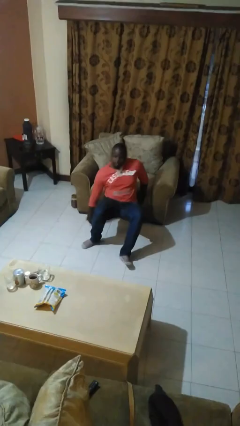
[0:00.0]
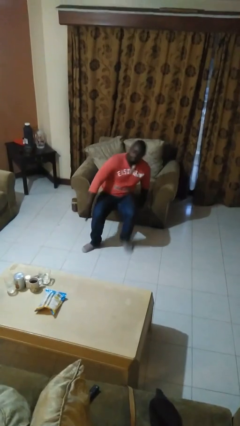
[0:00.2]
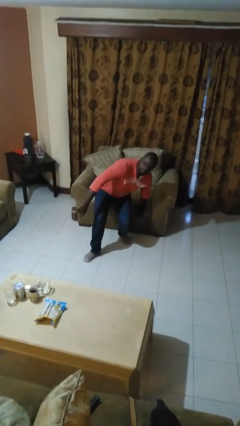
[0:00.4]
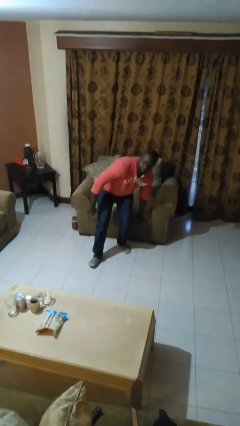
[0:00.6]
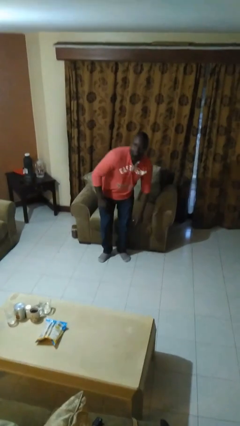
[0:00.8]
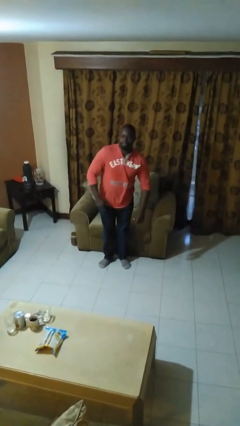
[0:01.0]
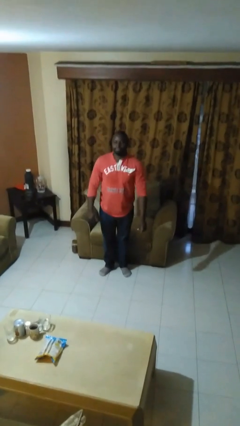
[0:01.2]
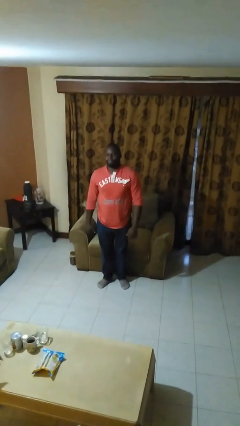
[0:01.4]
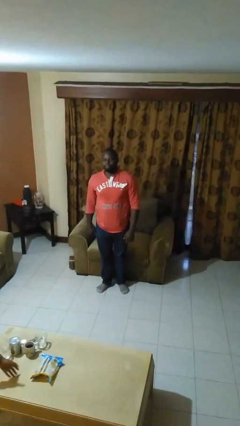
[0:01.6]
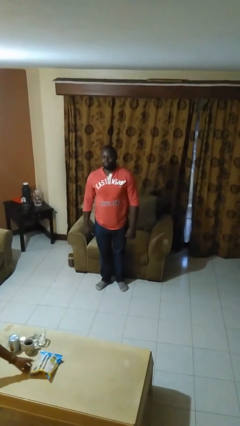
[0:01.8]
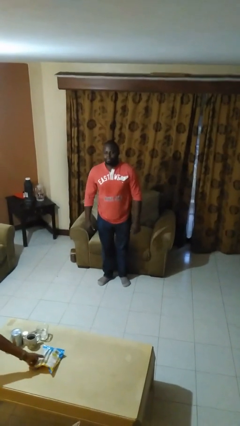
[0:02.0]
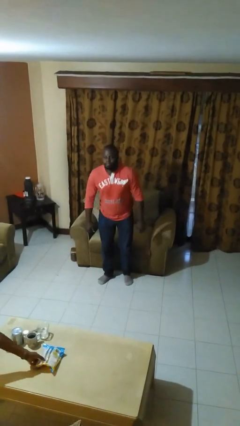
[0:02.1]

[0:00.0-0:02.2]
person stands up from floor

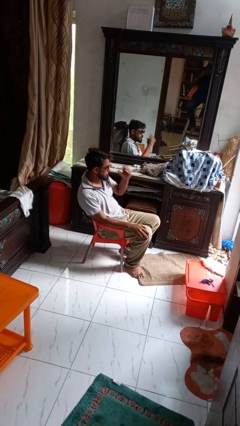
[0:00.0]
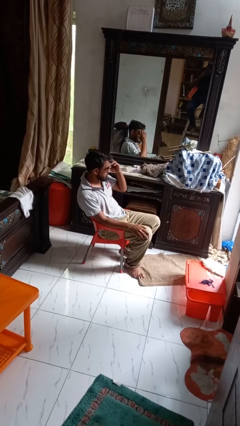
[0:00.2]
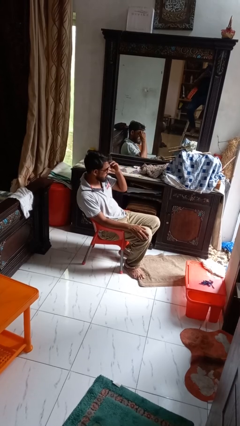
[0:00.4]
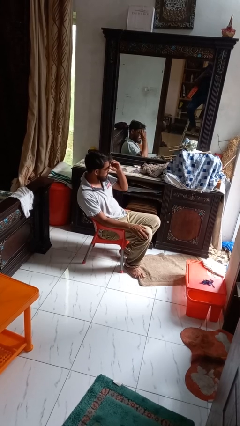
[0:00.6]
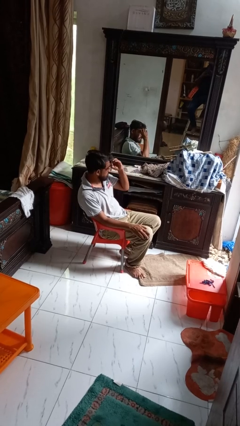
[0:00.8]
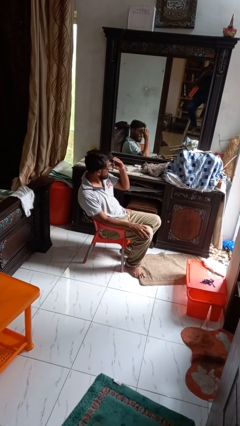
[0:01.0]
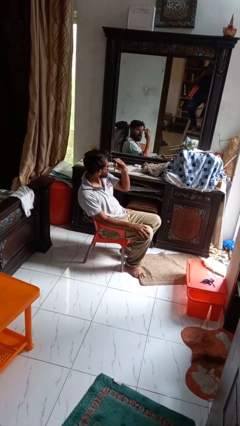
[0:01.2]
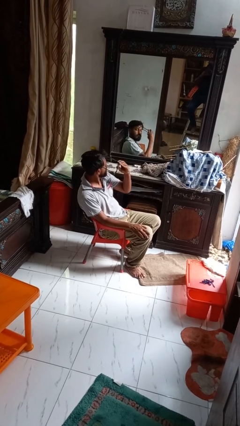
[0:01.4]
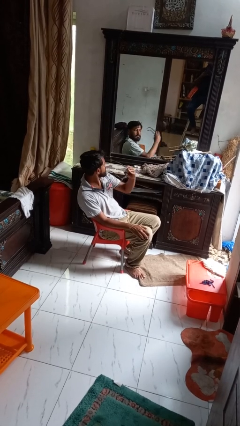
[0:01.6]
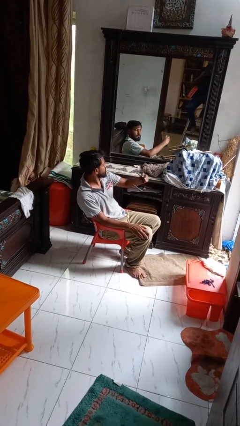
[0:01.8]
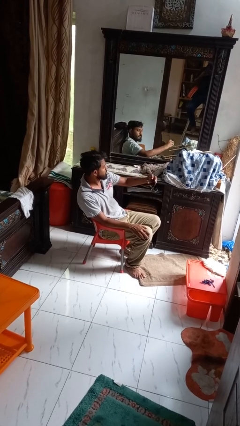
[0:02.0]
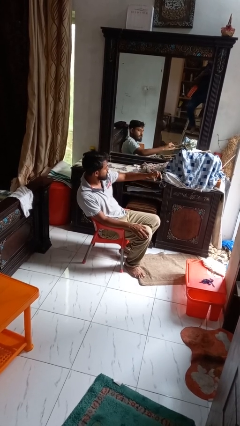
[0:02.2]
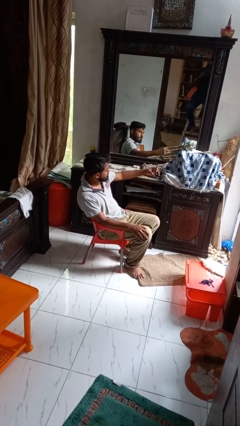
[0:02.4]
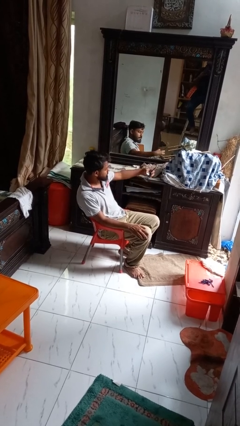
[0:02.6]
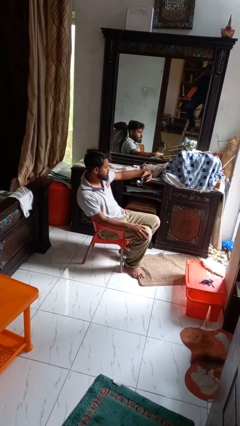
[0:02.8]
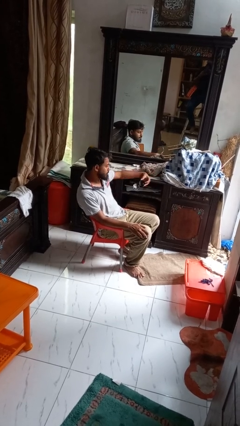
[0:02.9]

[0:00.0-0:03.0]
person takes off sunglasses

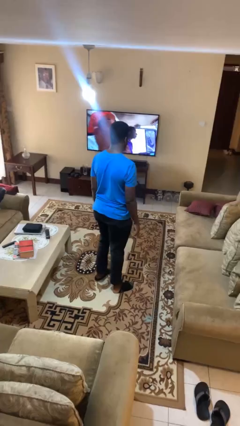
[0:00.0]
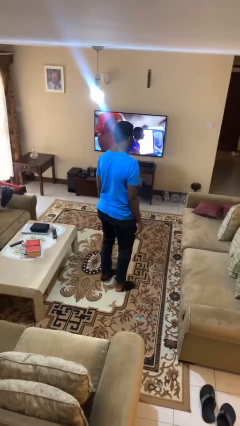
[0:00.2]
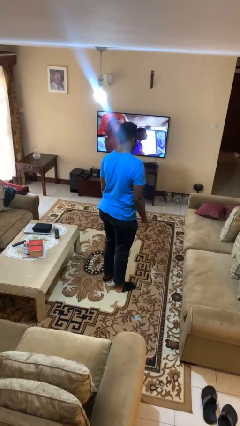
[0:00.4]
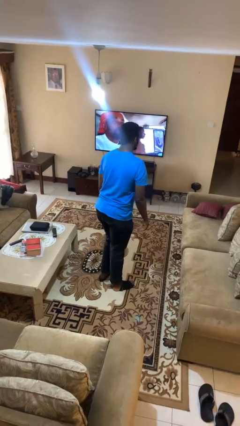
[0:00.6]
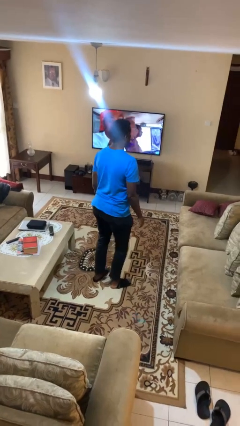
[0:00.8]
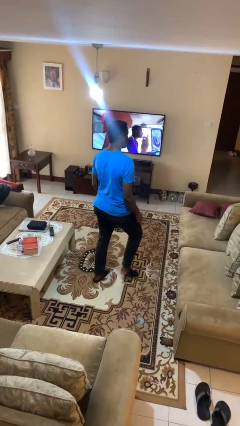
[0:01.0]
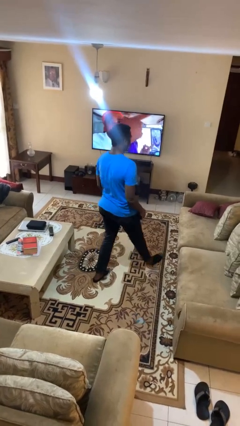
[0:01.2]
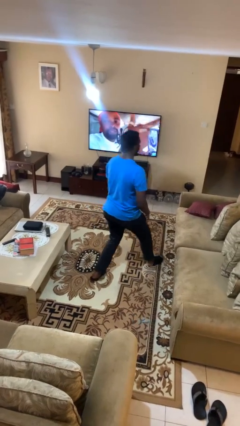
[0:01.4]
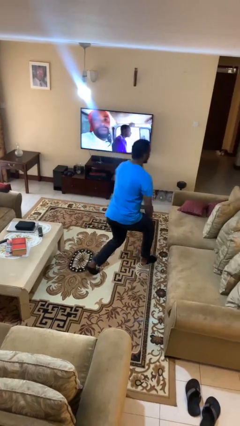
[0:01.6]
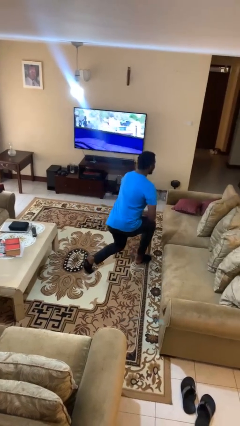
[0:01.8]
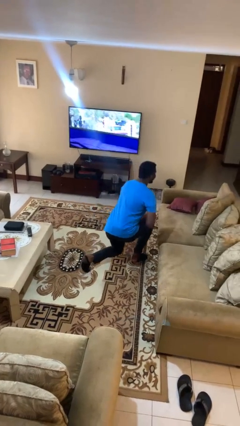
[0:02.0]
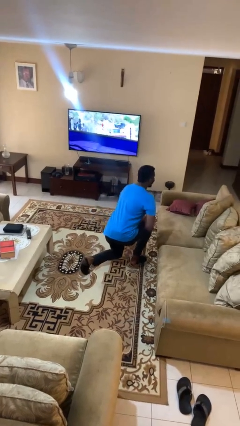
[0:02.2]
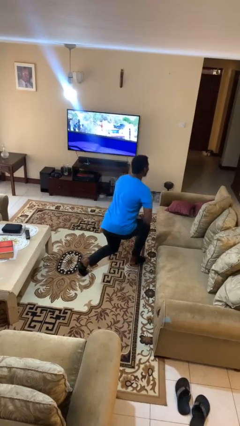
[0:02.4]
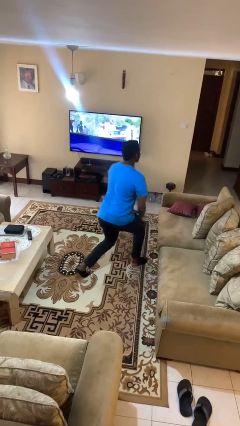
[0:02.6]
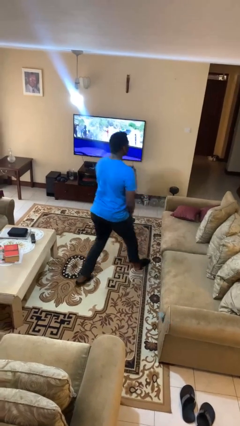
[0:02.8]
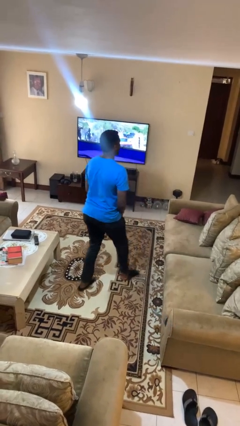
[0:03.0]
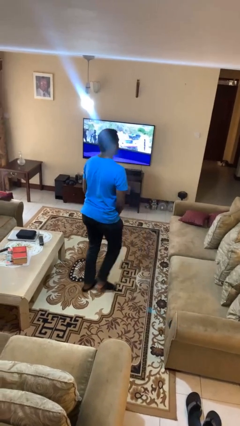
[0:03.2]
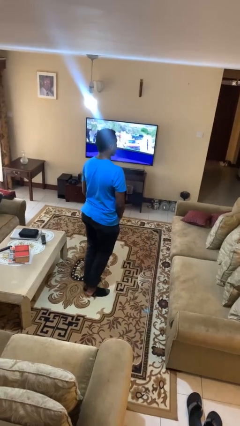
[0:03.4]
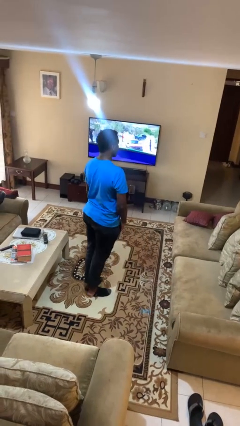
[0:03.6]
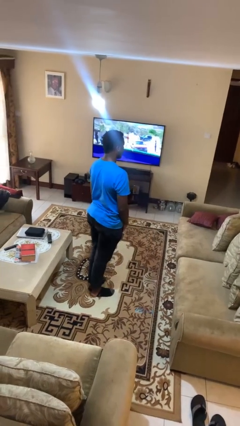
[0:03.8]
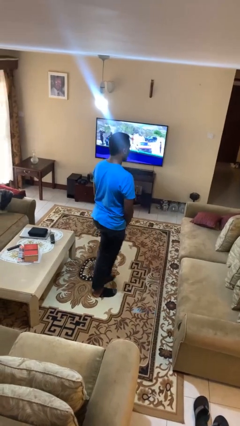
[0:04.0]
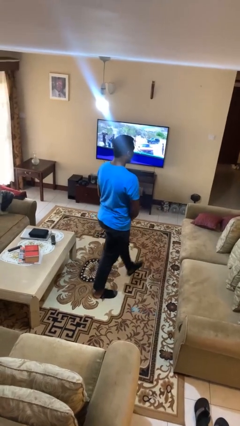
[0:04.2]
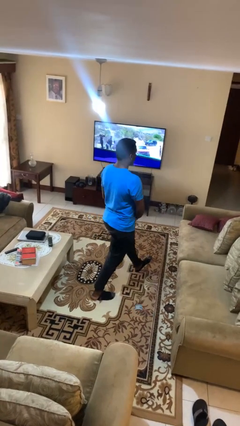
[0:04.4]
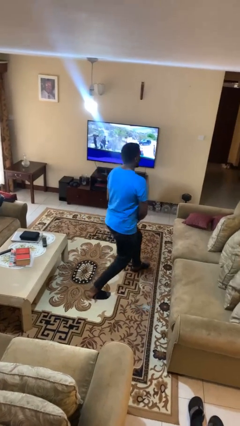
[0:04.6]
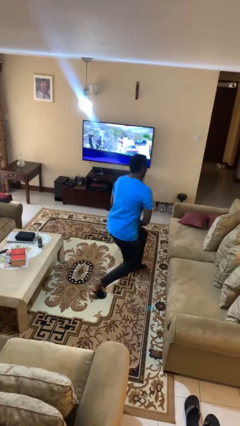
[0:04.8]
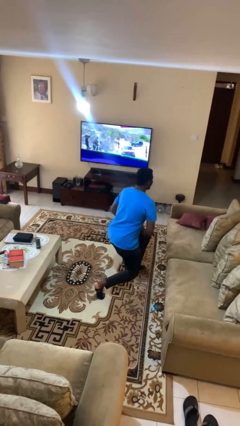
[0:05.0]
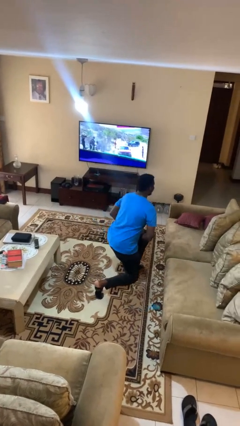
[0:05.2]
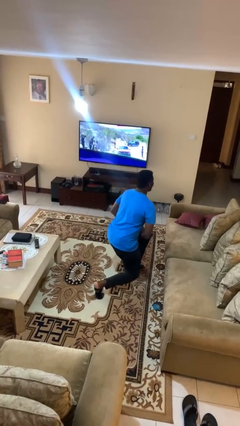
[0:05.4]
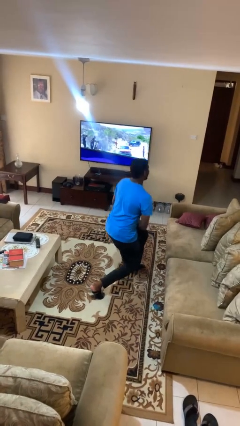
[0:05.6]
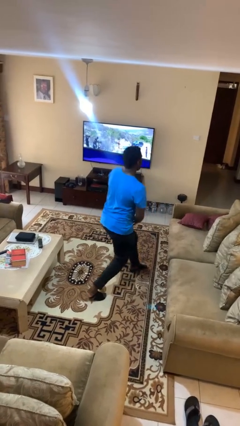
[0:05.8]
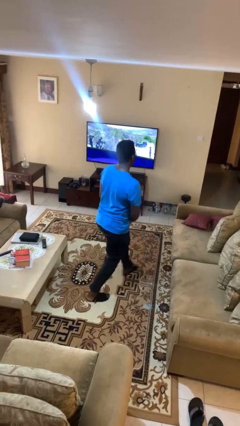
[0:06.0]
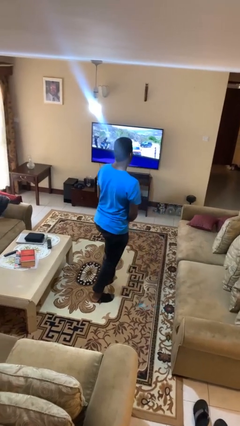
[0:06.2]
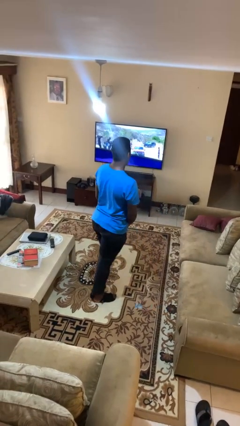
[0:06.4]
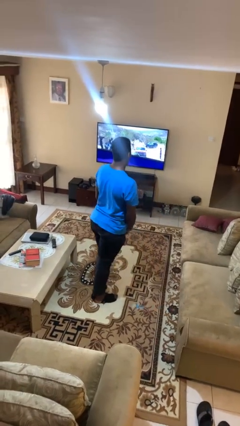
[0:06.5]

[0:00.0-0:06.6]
person exercises with lunges

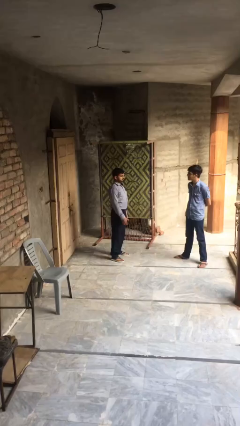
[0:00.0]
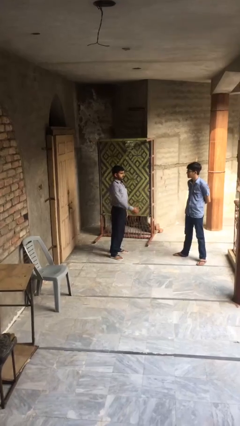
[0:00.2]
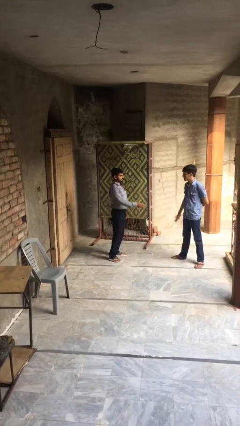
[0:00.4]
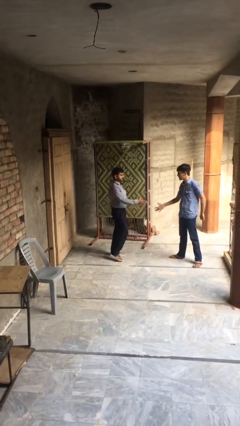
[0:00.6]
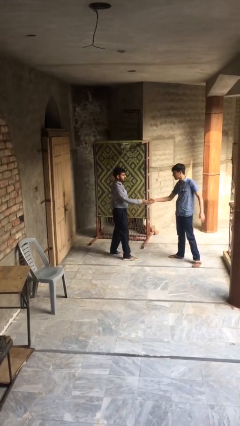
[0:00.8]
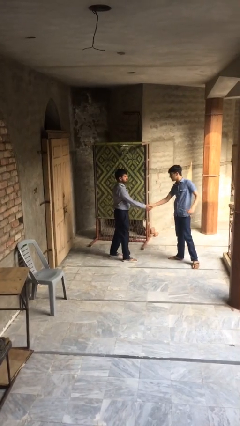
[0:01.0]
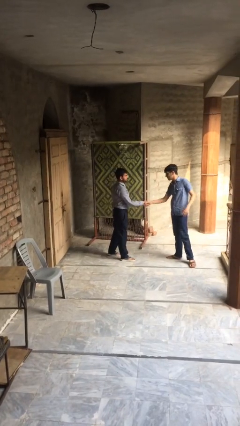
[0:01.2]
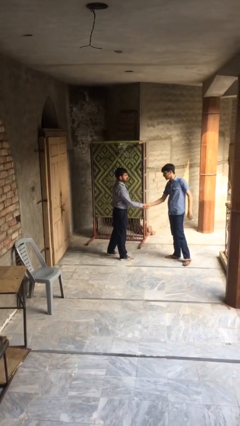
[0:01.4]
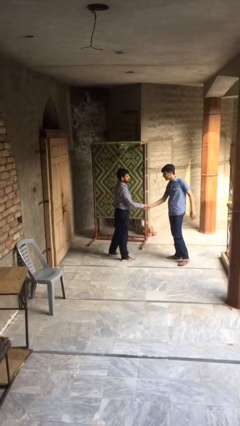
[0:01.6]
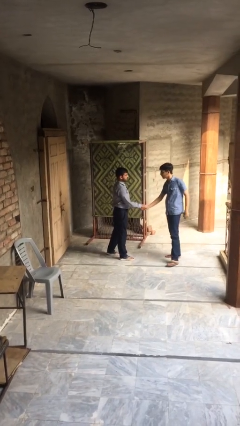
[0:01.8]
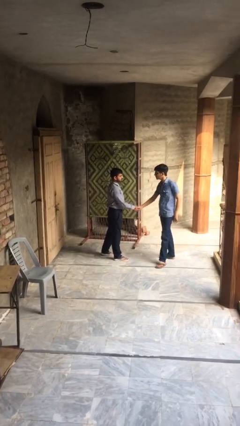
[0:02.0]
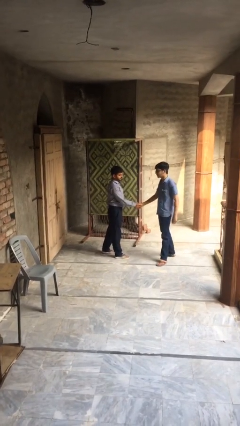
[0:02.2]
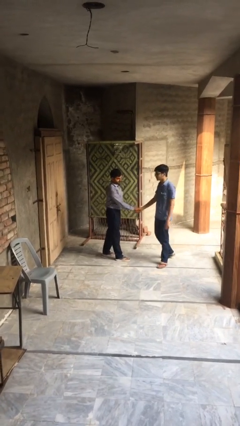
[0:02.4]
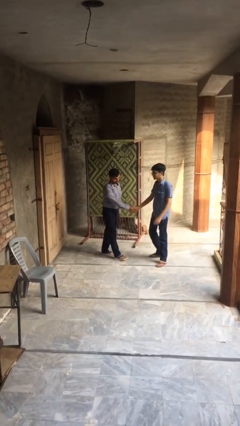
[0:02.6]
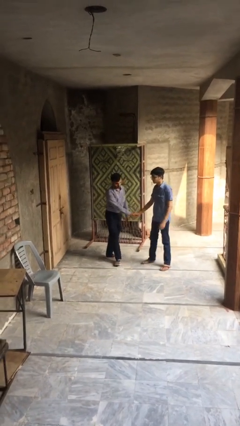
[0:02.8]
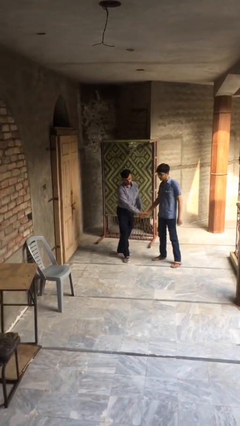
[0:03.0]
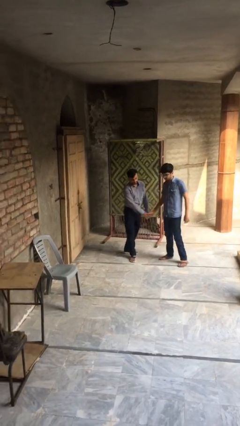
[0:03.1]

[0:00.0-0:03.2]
person shakes hand

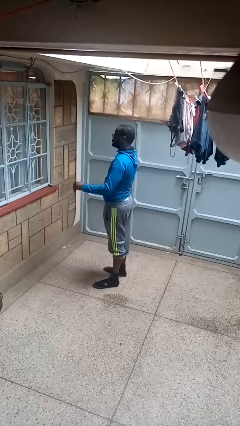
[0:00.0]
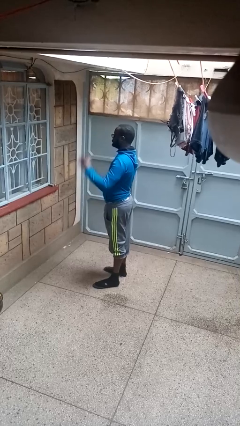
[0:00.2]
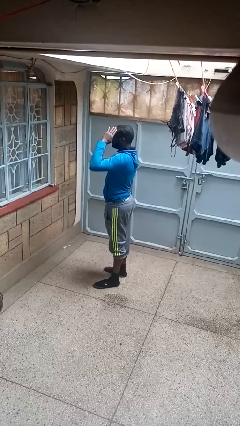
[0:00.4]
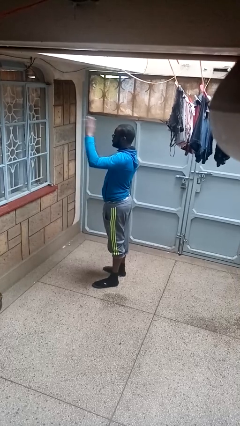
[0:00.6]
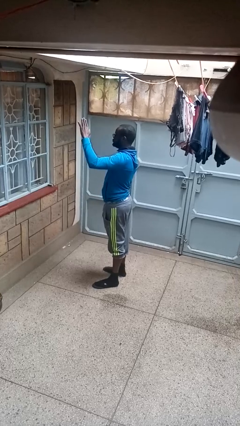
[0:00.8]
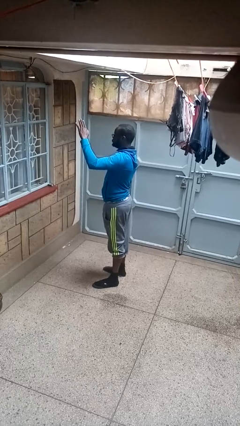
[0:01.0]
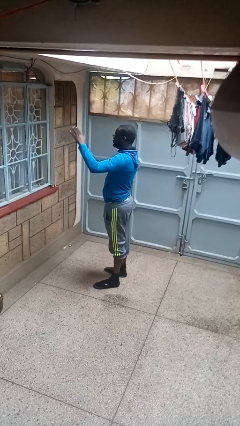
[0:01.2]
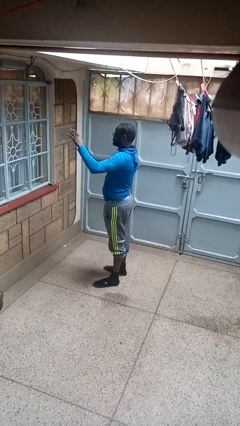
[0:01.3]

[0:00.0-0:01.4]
person salutes

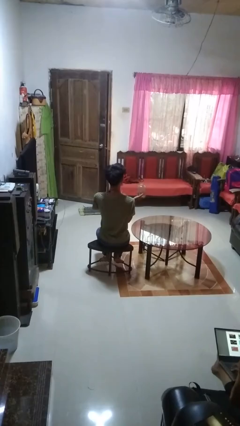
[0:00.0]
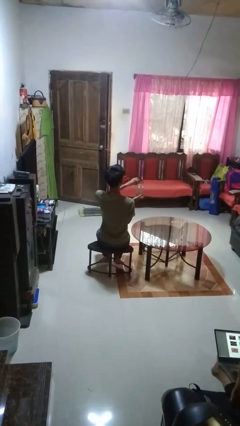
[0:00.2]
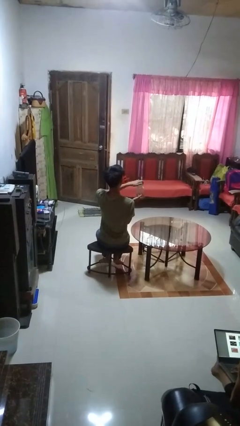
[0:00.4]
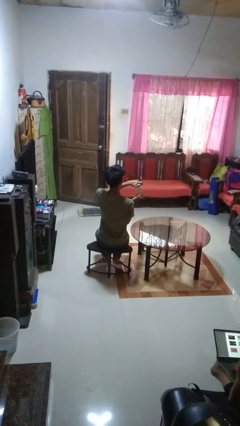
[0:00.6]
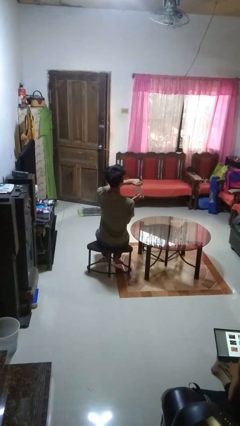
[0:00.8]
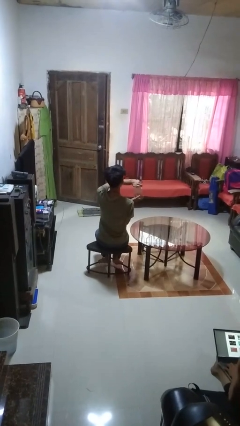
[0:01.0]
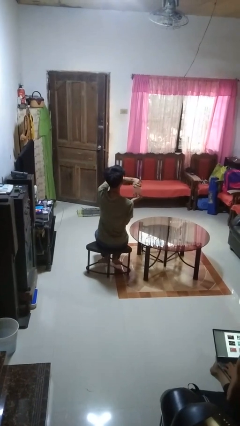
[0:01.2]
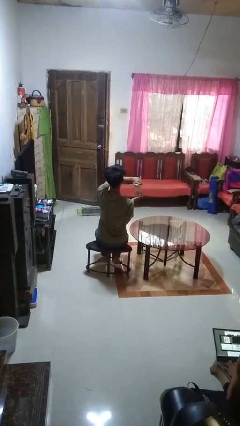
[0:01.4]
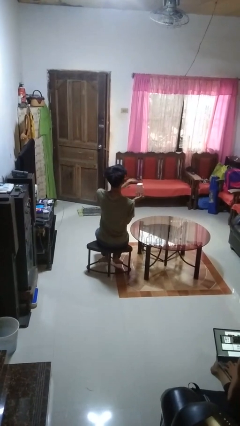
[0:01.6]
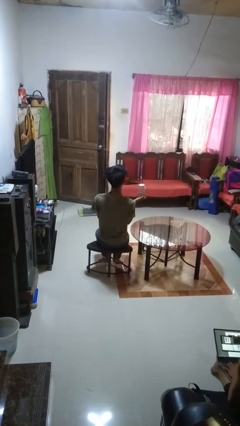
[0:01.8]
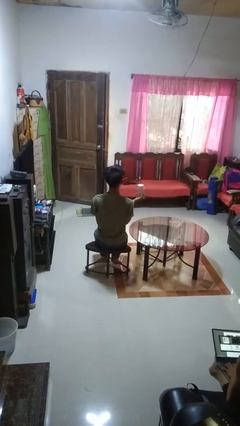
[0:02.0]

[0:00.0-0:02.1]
person closes jar
